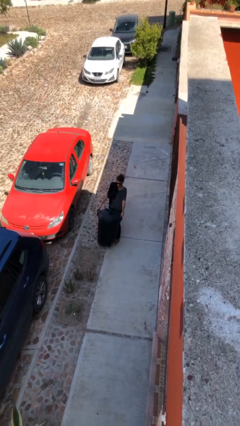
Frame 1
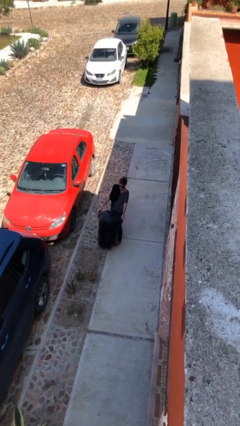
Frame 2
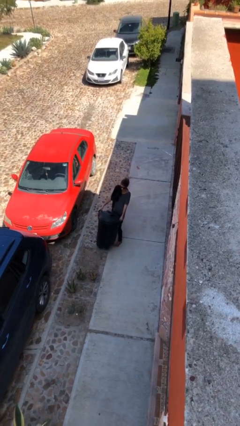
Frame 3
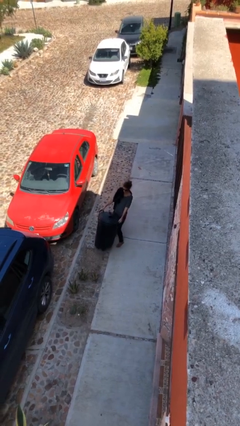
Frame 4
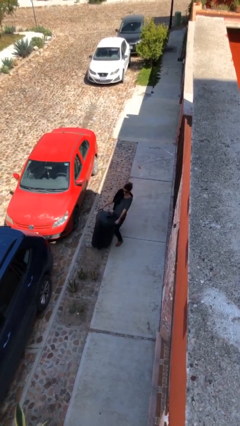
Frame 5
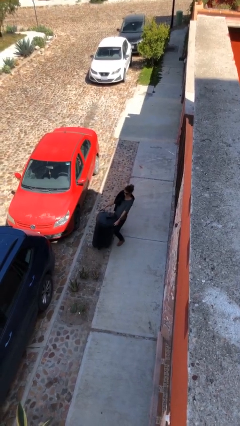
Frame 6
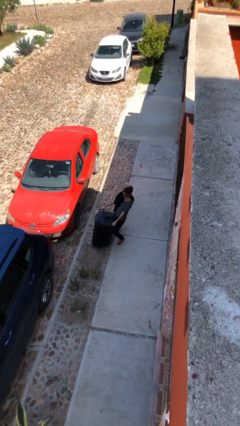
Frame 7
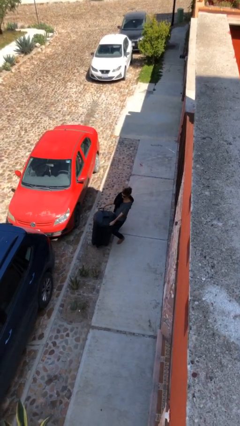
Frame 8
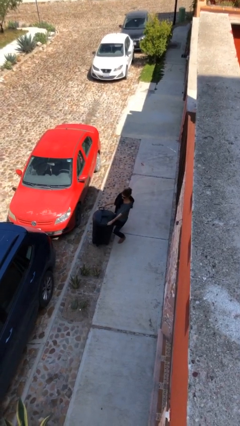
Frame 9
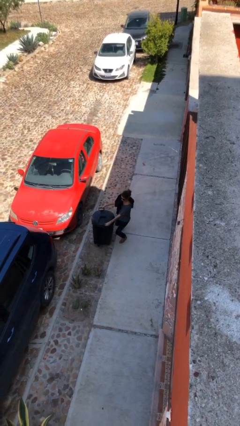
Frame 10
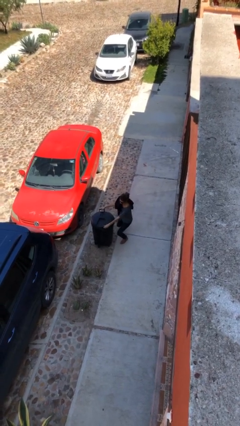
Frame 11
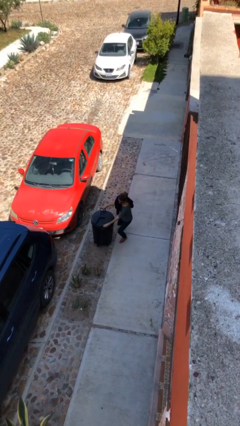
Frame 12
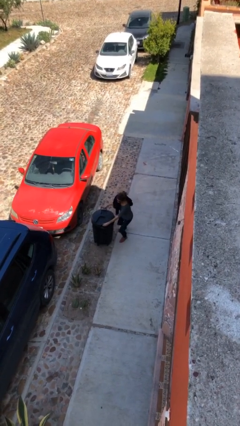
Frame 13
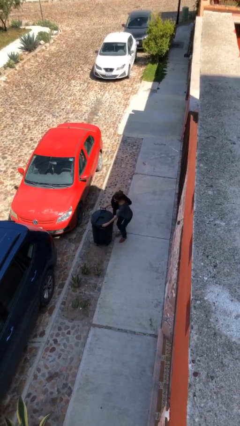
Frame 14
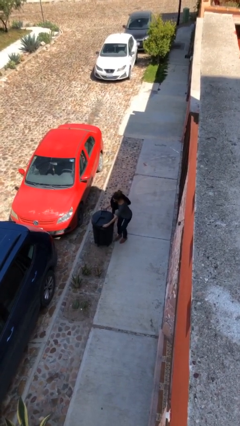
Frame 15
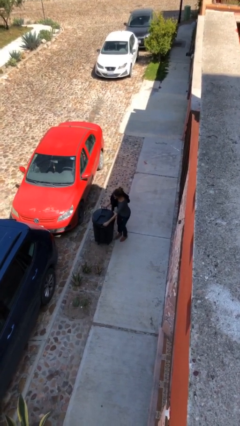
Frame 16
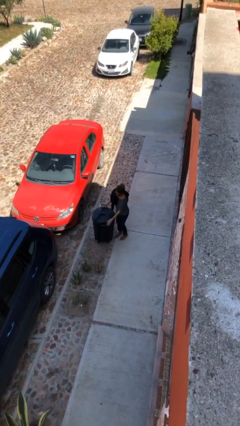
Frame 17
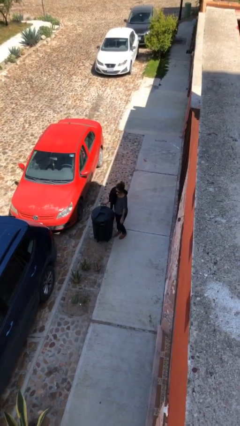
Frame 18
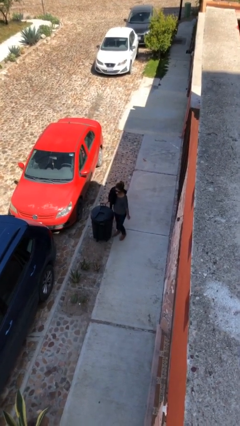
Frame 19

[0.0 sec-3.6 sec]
person puts down object on floor

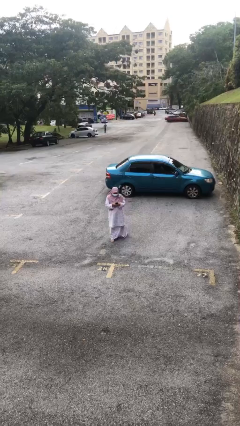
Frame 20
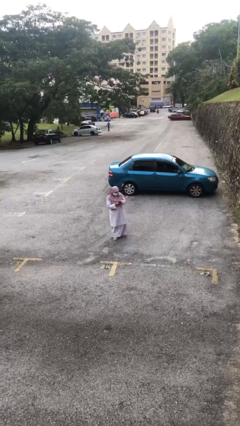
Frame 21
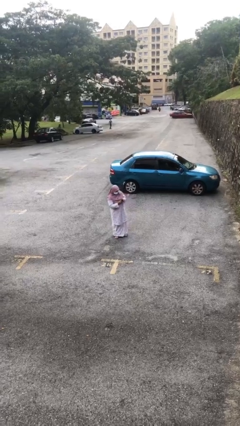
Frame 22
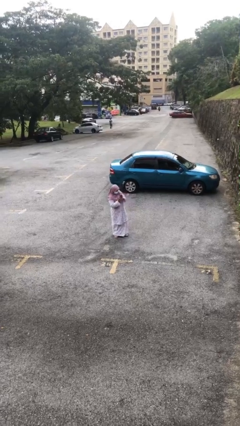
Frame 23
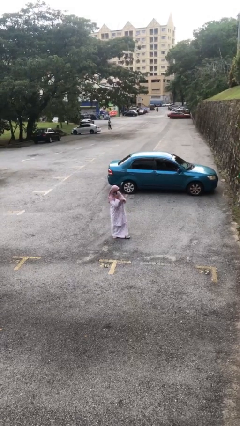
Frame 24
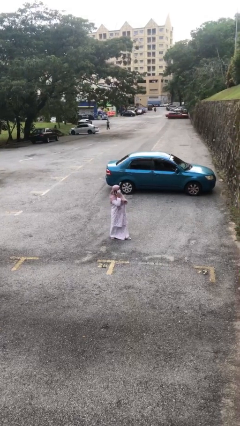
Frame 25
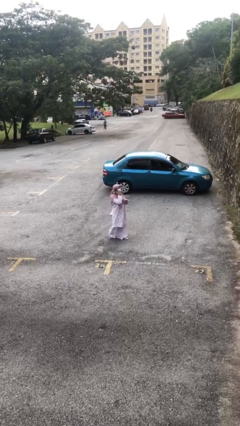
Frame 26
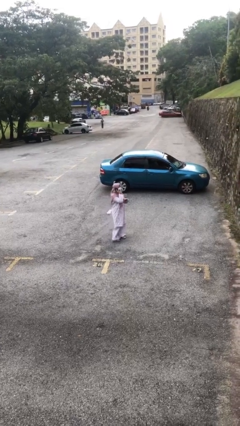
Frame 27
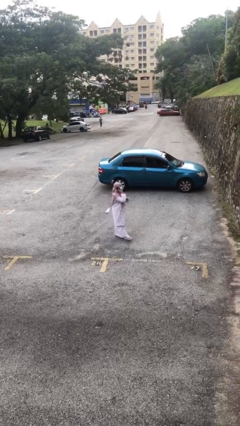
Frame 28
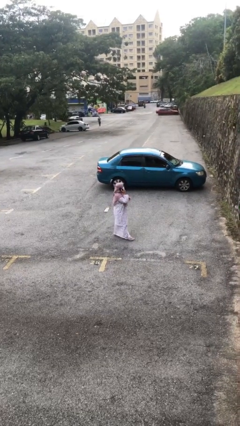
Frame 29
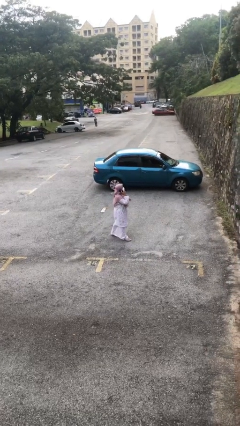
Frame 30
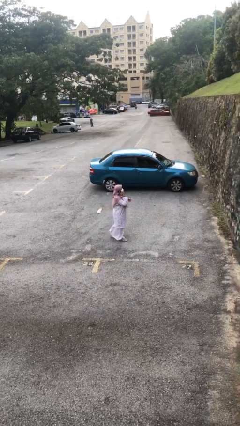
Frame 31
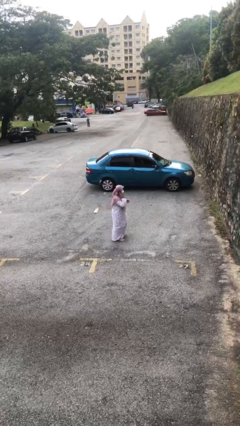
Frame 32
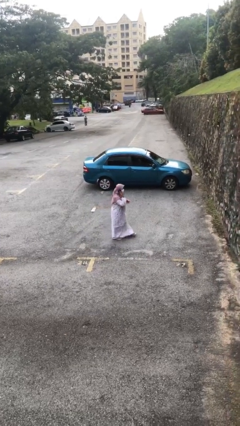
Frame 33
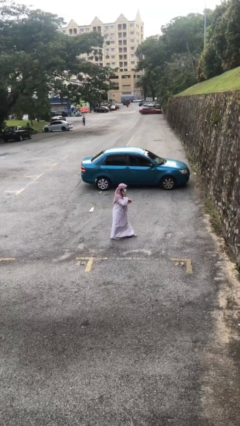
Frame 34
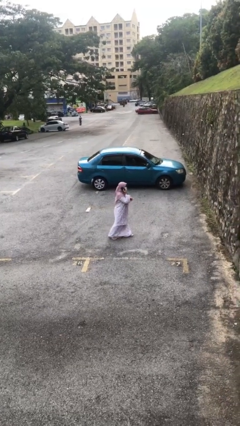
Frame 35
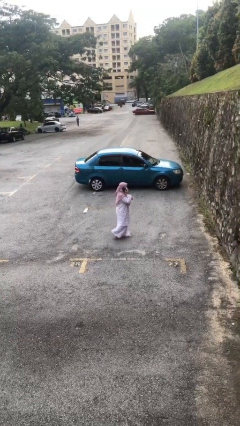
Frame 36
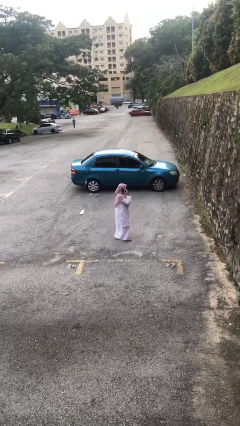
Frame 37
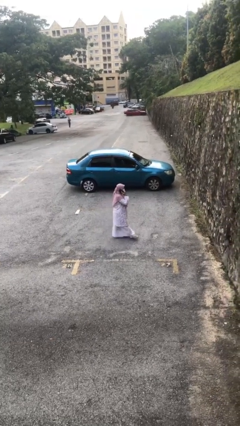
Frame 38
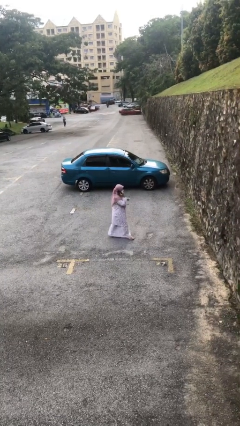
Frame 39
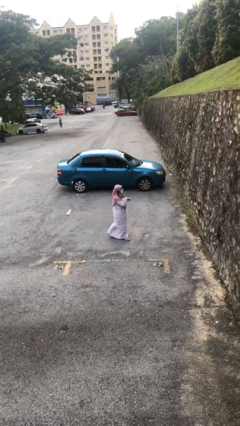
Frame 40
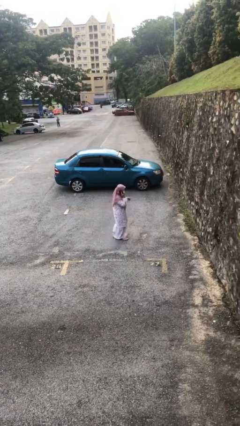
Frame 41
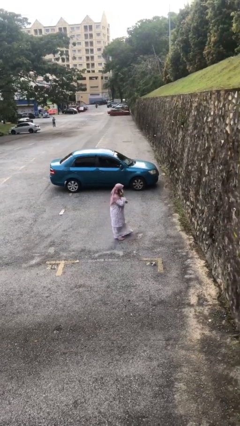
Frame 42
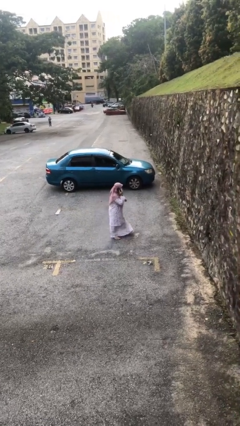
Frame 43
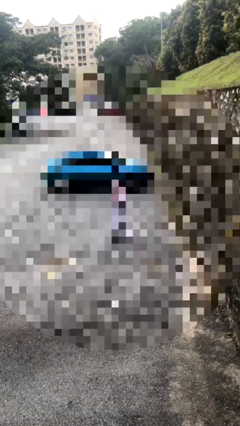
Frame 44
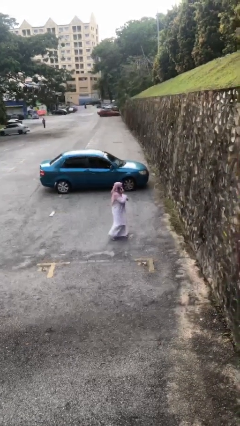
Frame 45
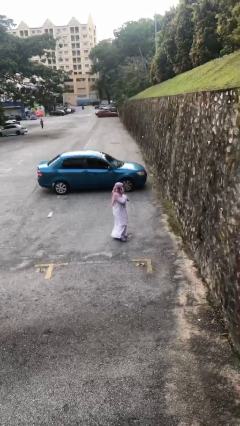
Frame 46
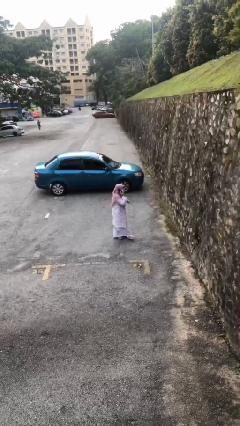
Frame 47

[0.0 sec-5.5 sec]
person talks on phone

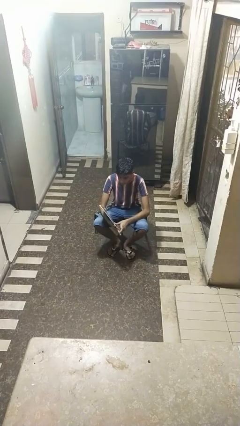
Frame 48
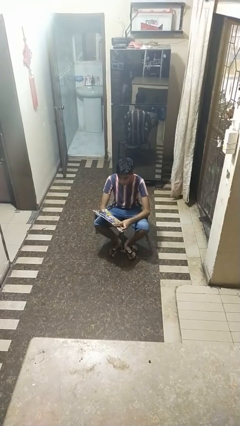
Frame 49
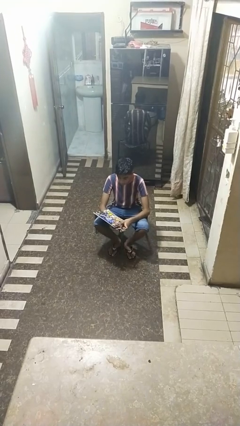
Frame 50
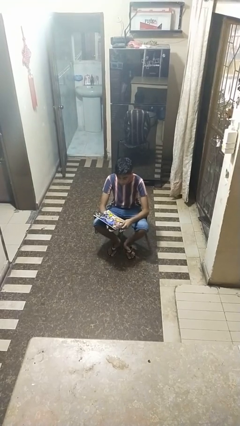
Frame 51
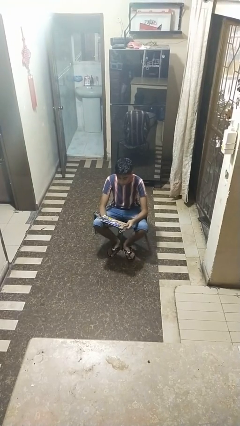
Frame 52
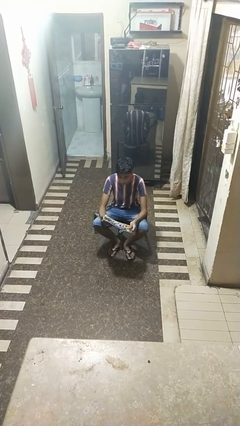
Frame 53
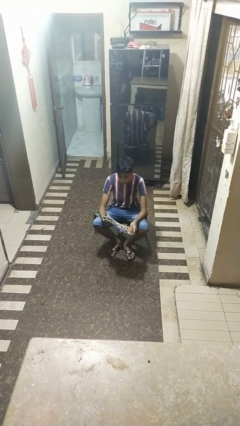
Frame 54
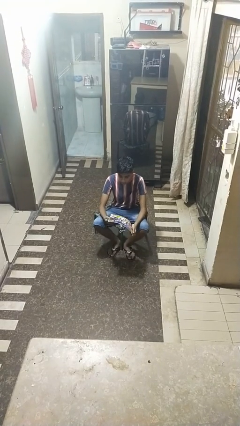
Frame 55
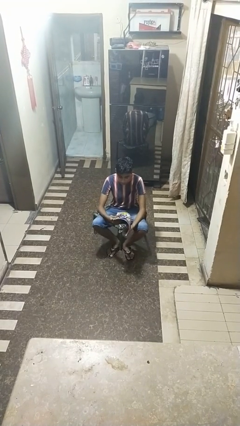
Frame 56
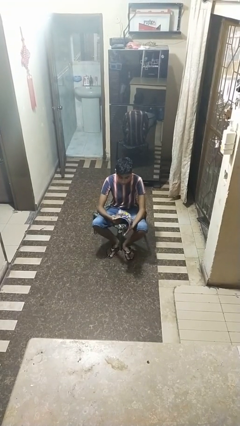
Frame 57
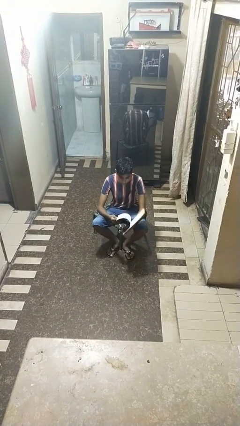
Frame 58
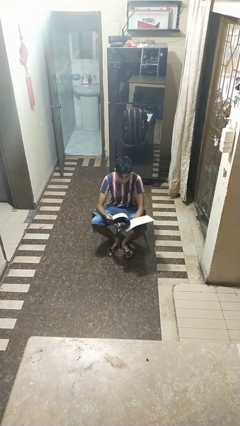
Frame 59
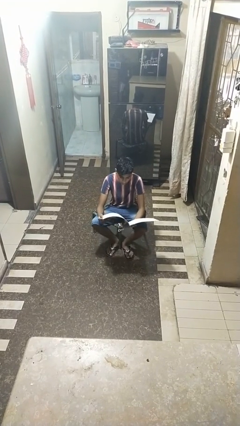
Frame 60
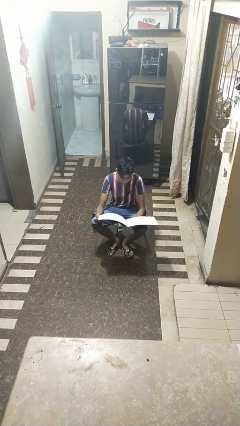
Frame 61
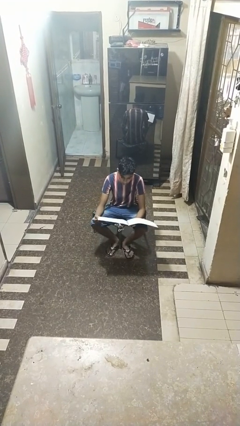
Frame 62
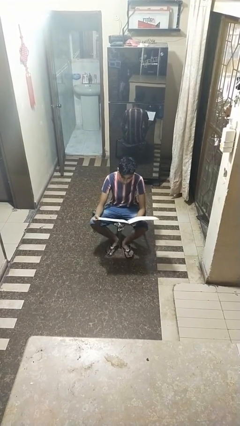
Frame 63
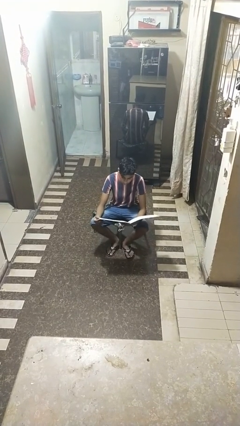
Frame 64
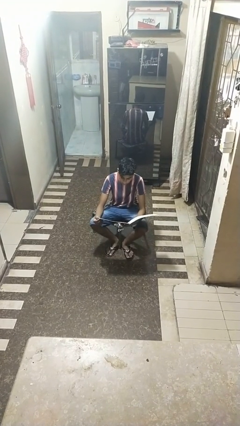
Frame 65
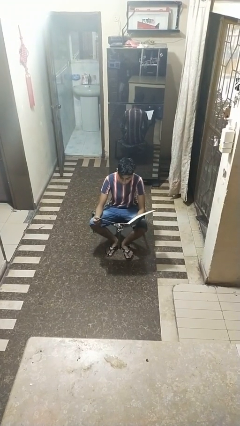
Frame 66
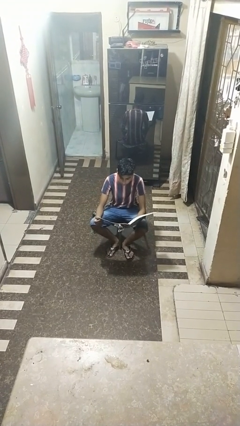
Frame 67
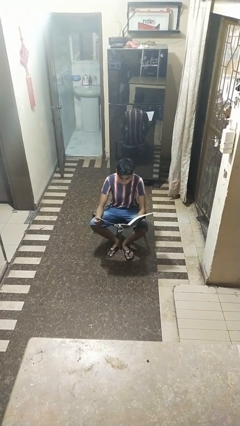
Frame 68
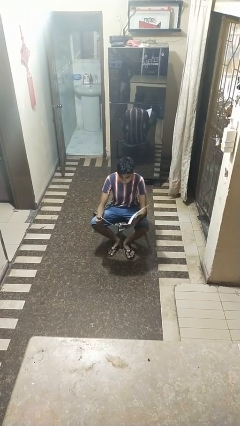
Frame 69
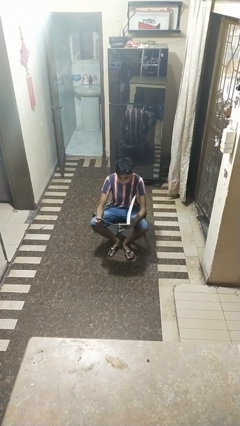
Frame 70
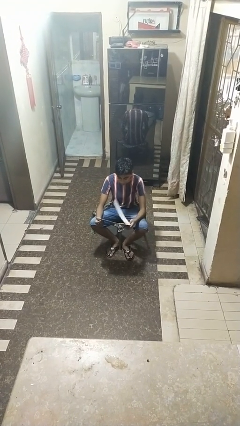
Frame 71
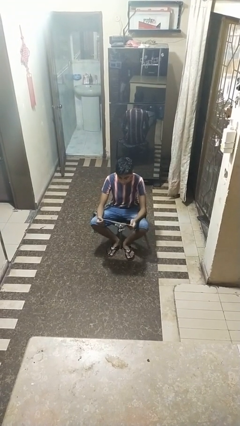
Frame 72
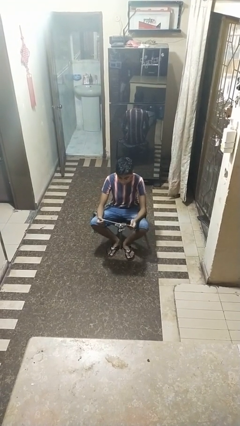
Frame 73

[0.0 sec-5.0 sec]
person reads magazine

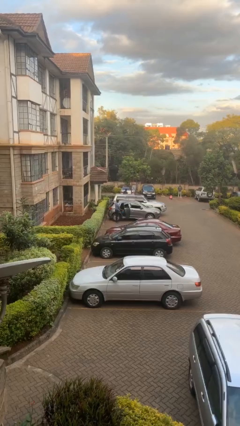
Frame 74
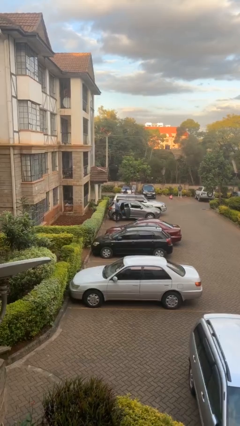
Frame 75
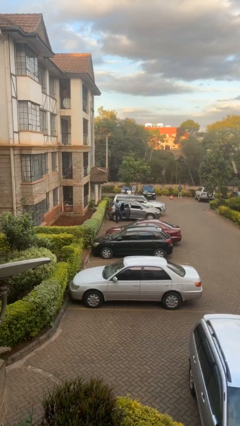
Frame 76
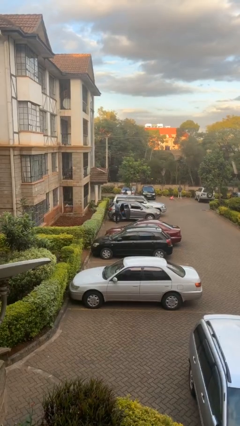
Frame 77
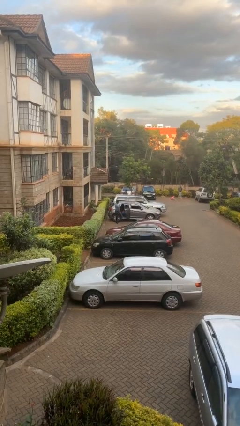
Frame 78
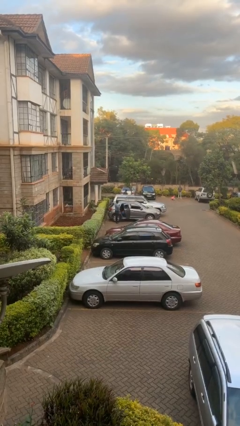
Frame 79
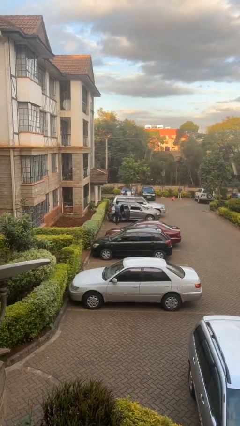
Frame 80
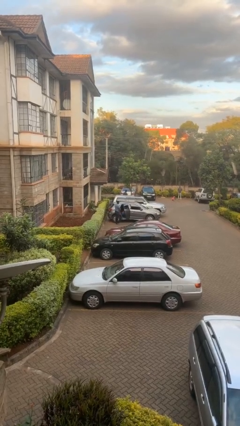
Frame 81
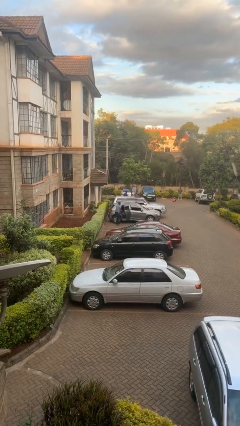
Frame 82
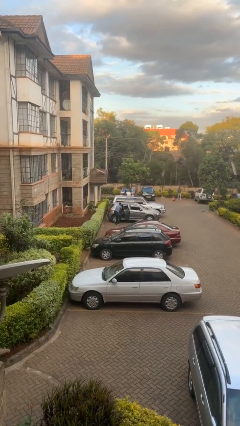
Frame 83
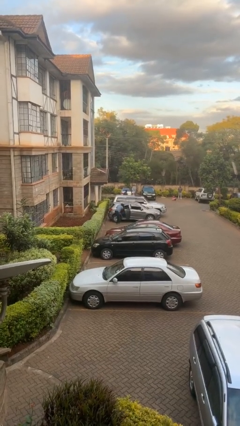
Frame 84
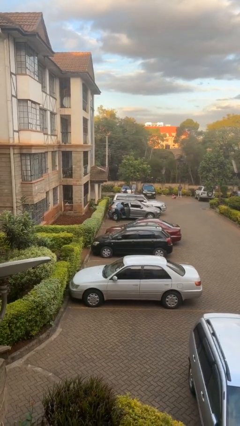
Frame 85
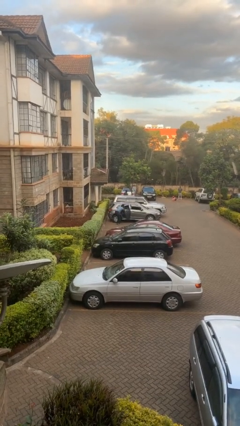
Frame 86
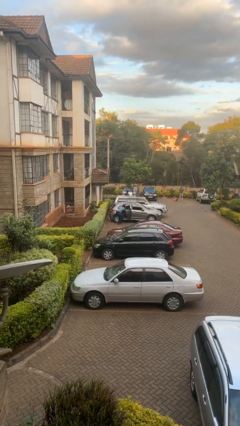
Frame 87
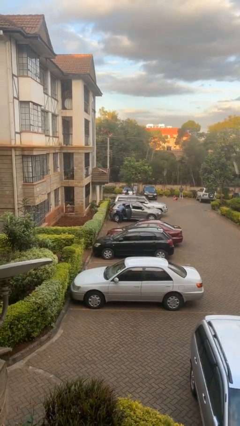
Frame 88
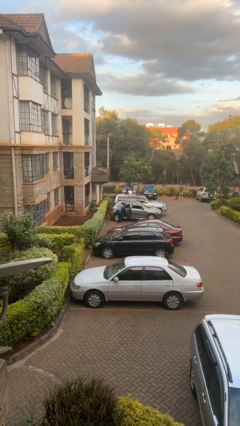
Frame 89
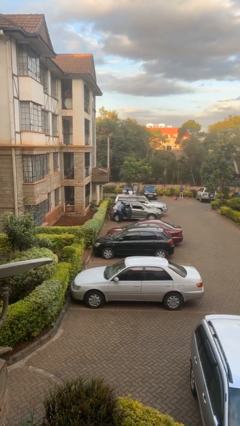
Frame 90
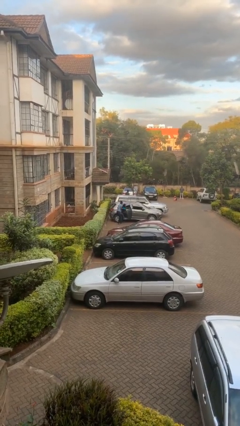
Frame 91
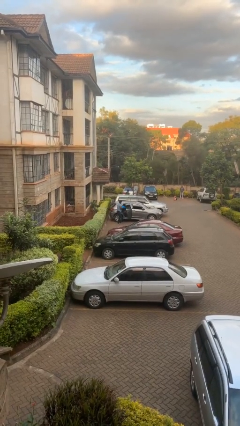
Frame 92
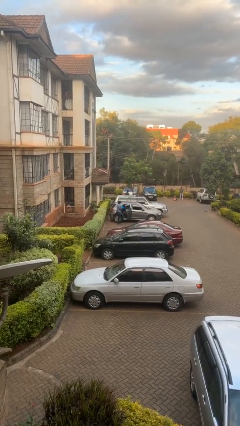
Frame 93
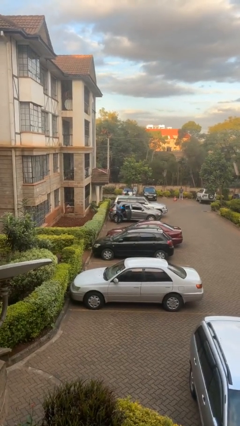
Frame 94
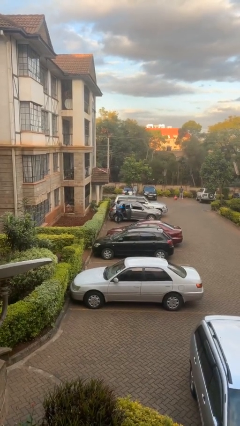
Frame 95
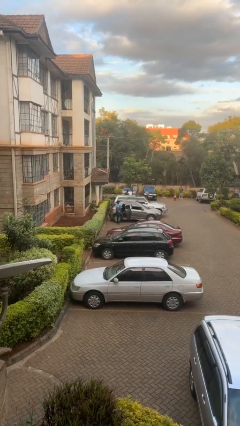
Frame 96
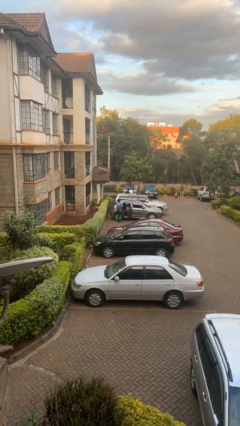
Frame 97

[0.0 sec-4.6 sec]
person unloads car
